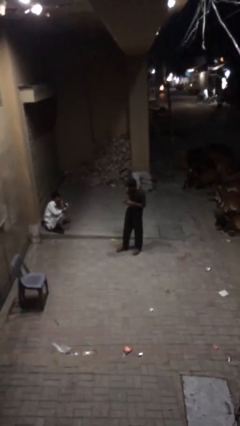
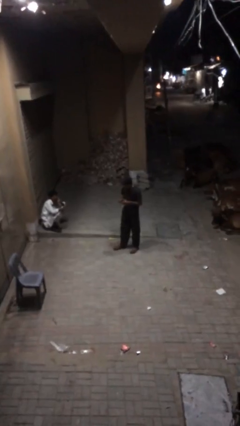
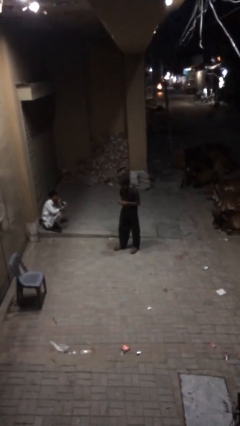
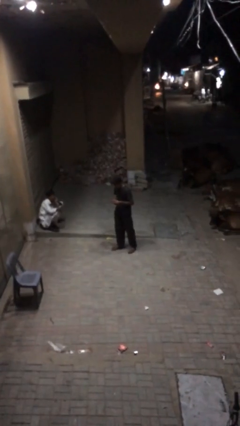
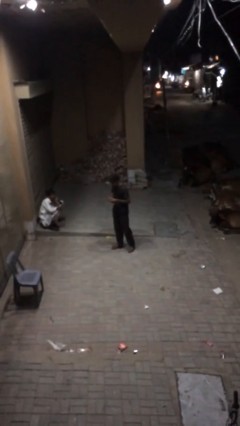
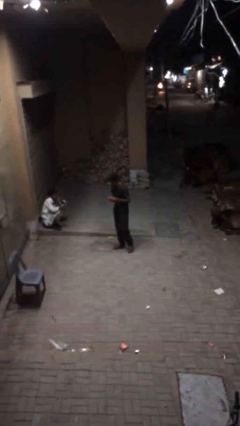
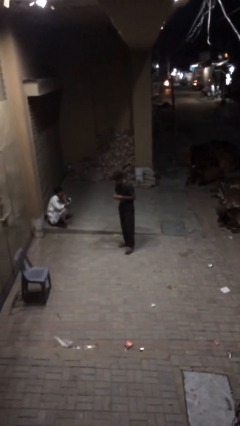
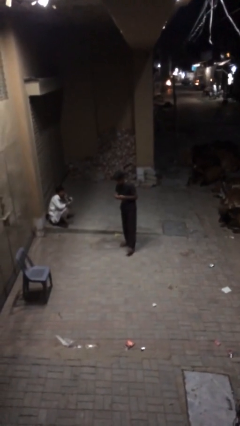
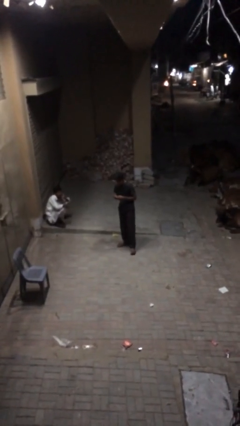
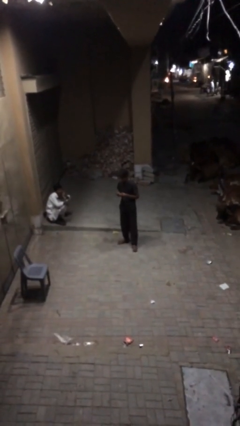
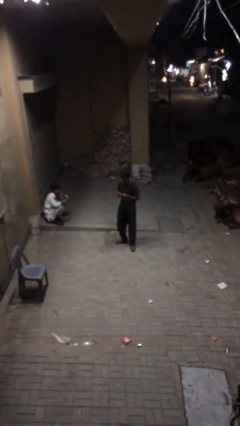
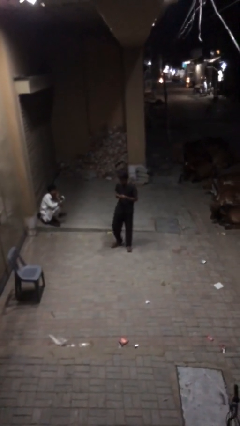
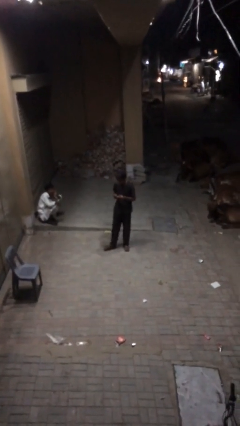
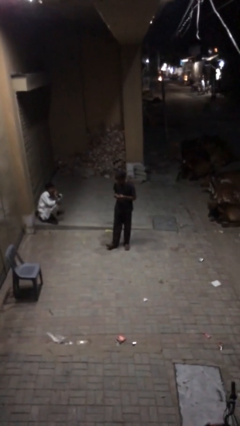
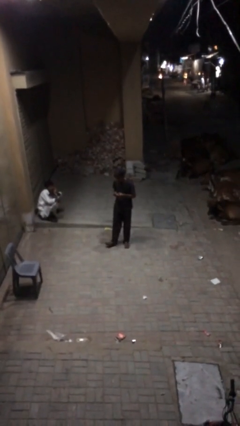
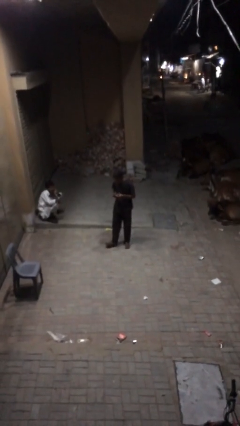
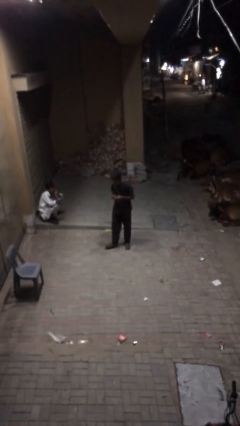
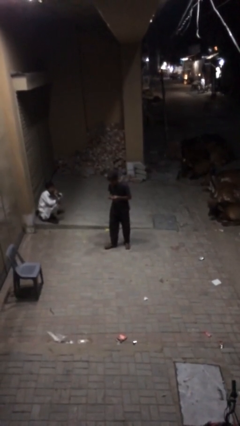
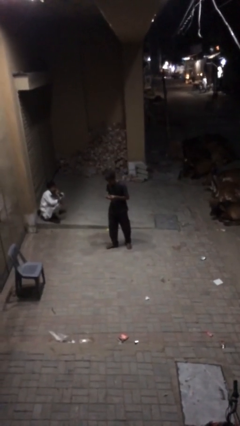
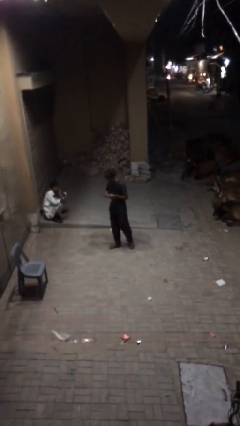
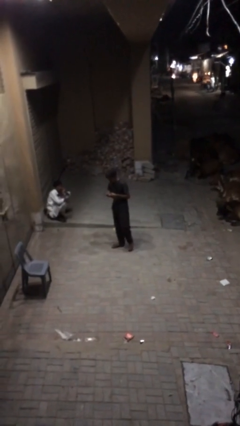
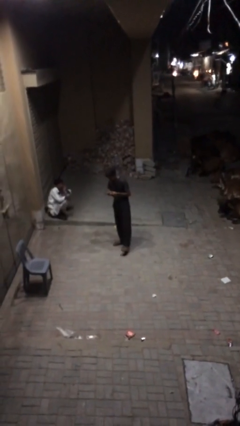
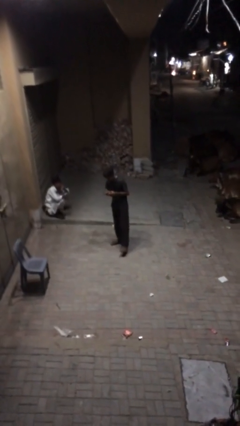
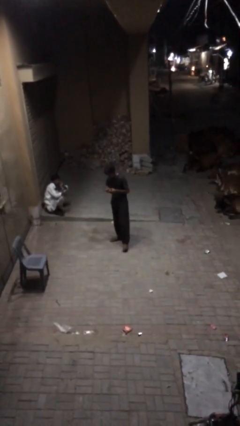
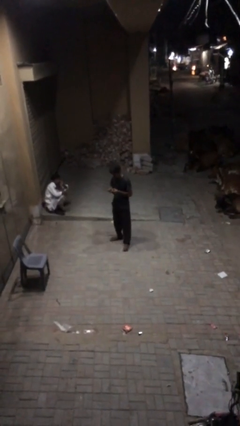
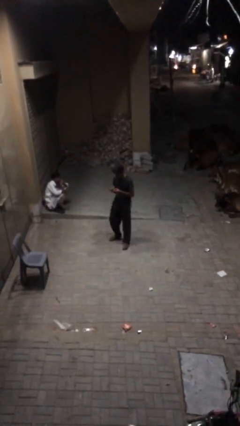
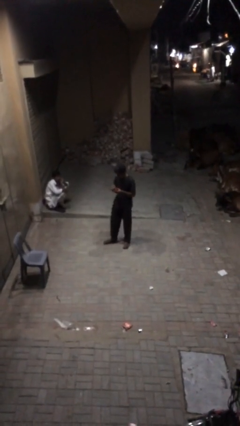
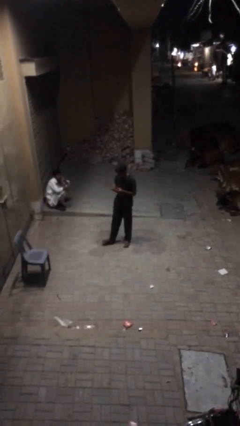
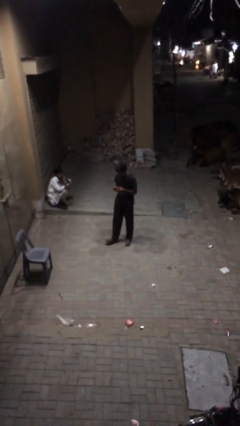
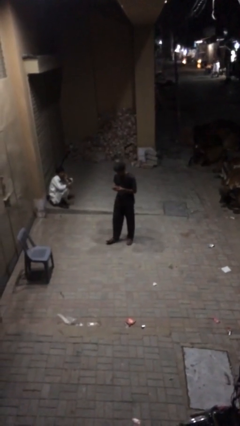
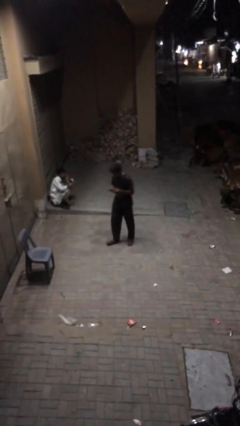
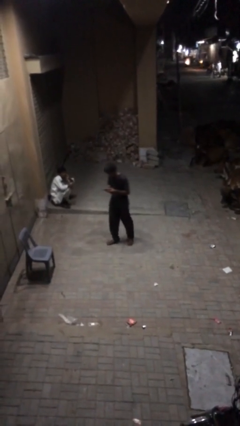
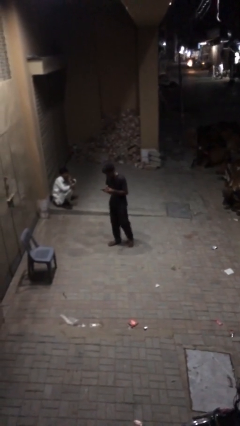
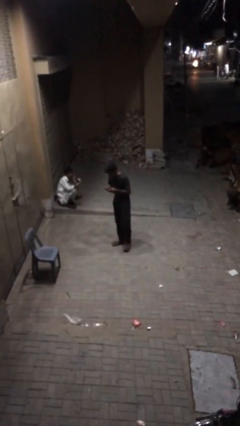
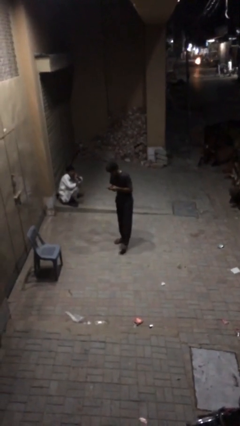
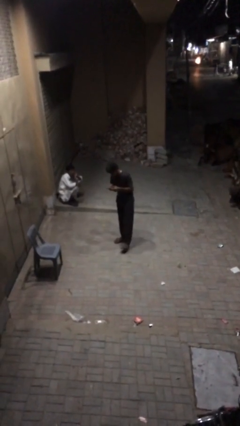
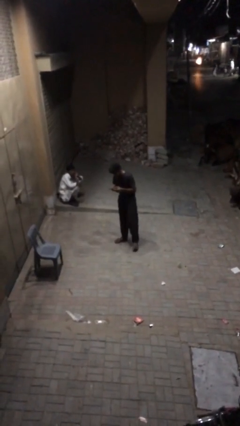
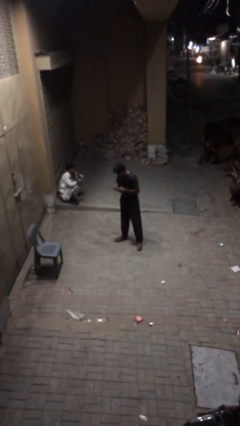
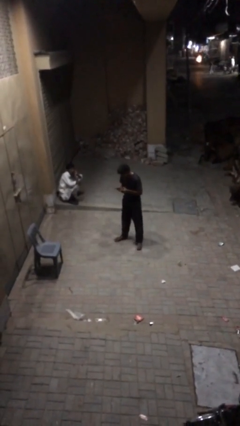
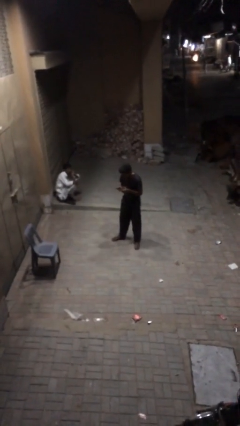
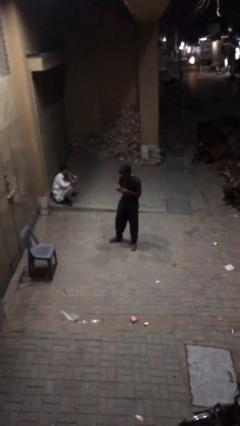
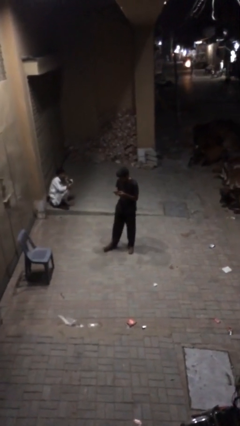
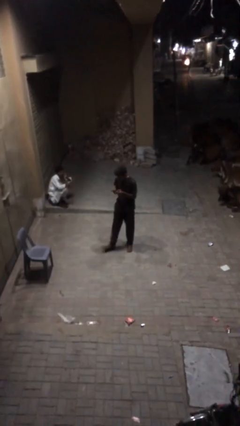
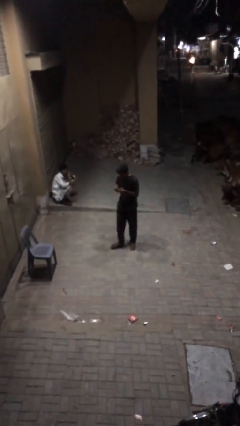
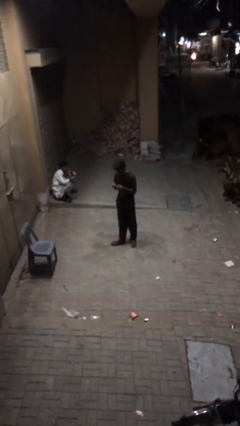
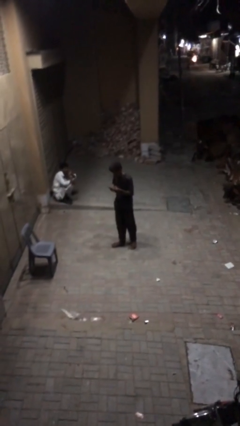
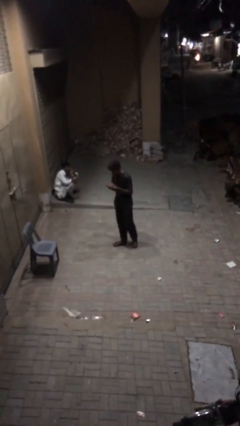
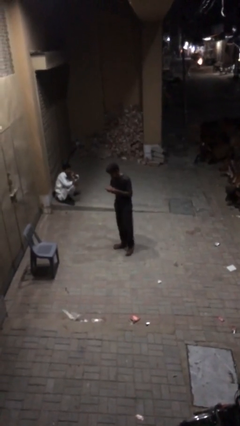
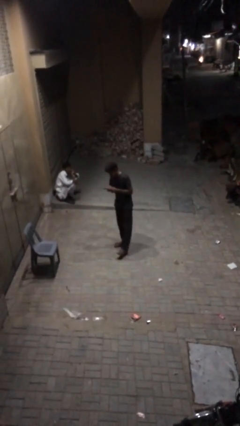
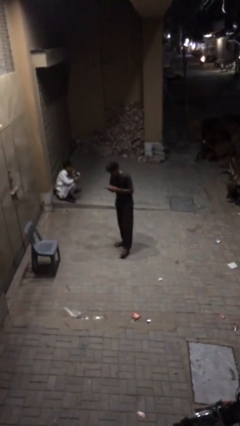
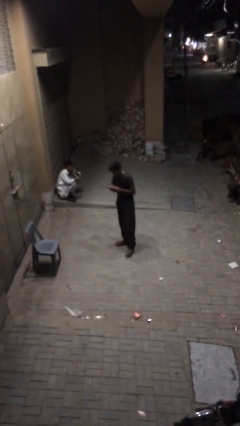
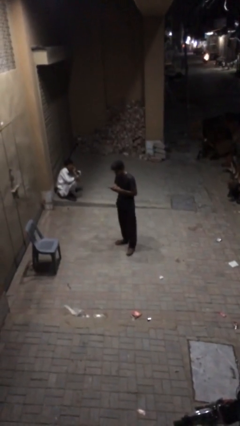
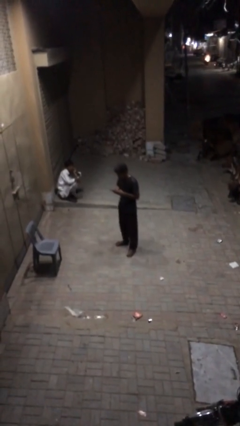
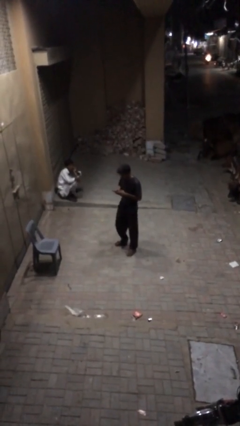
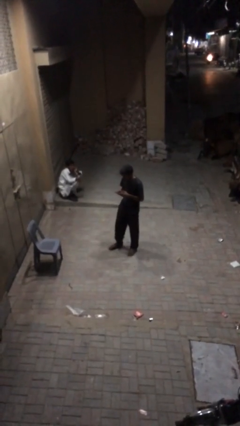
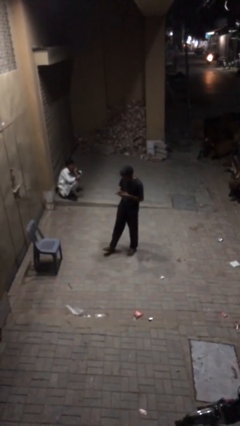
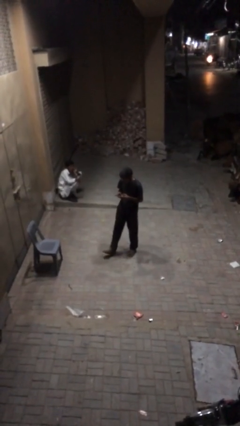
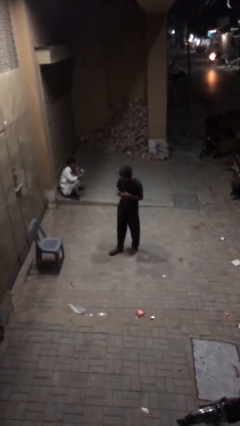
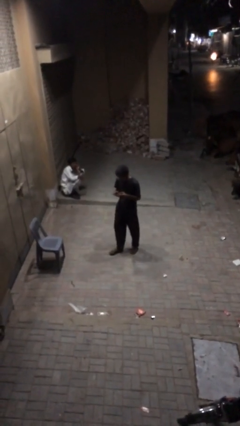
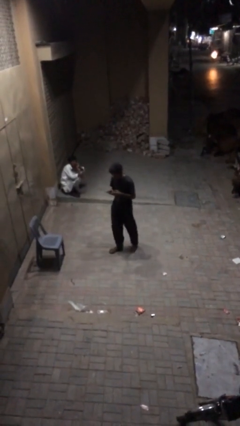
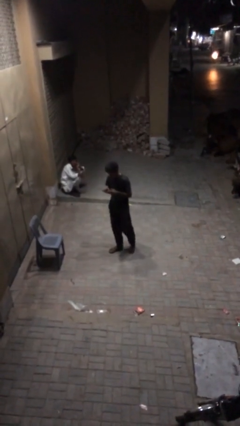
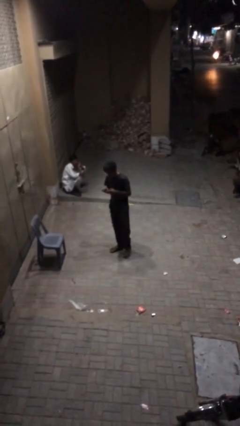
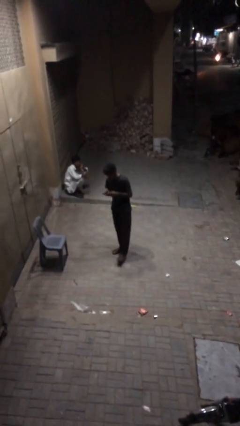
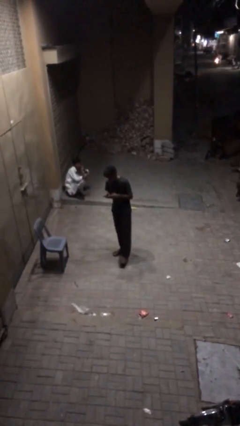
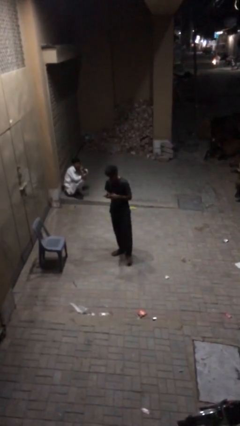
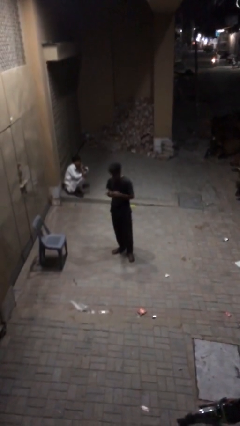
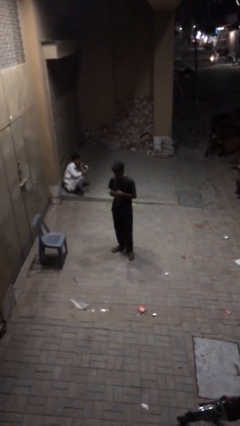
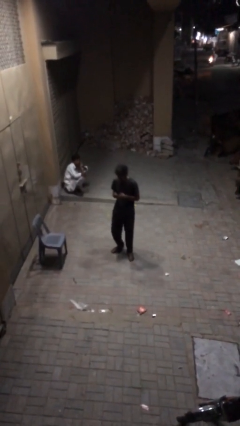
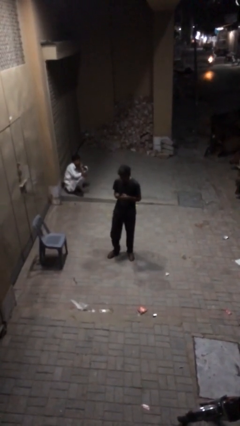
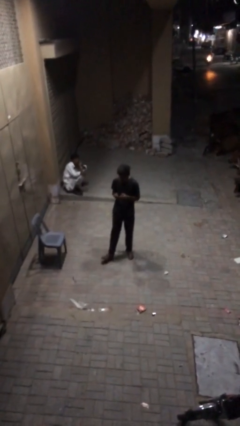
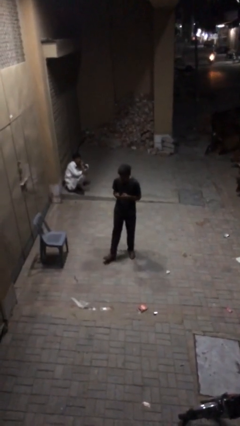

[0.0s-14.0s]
person texts on phone

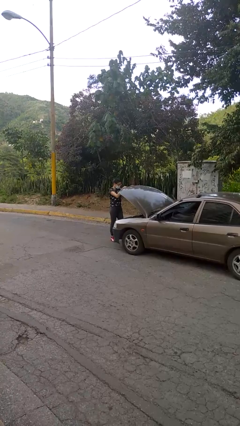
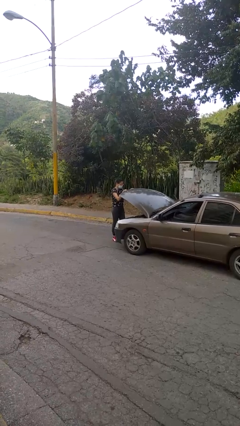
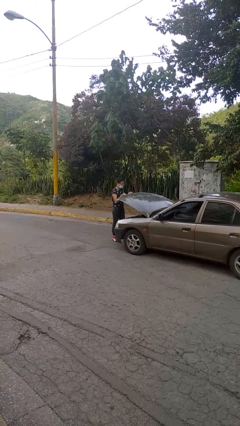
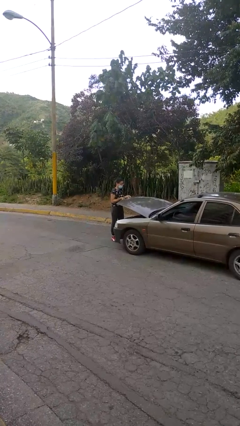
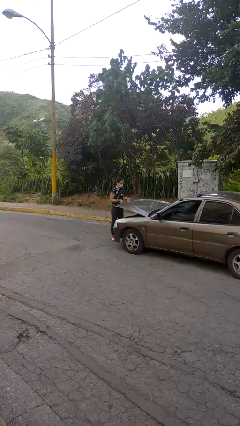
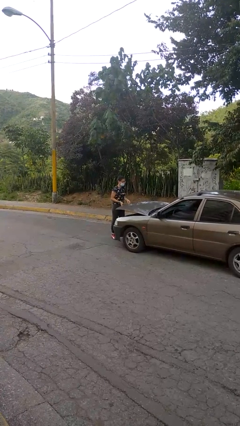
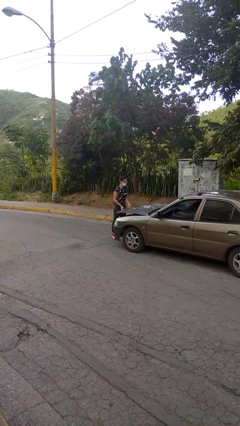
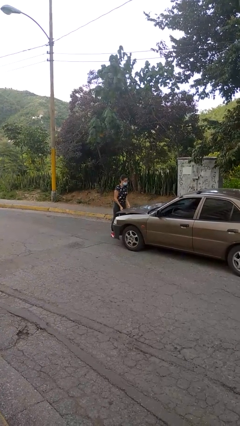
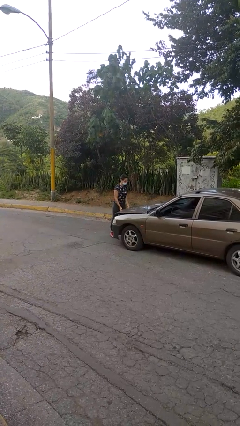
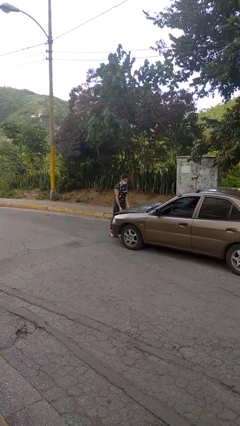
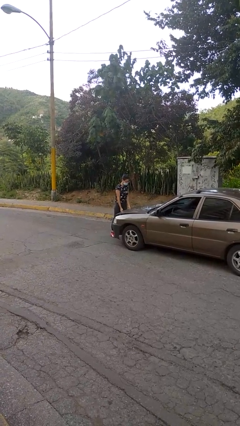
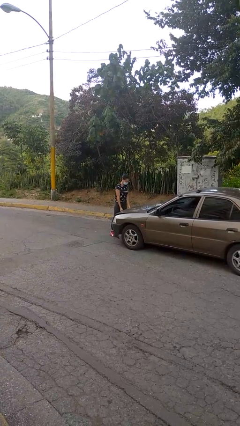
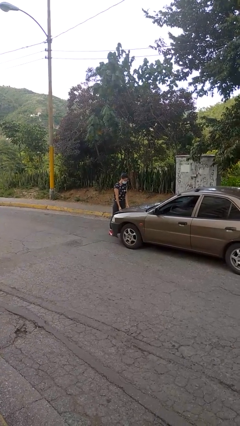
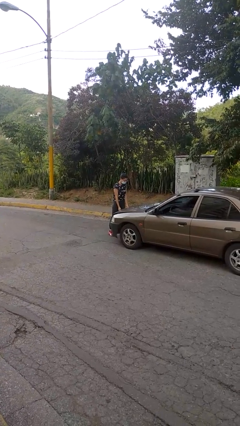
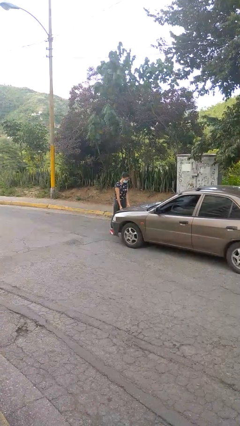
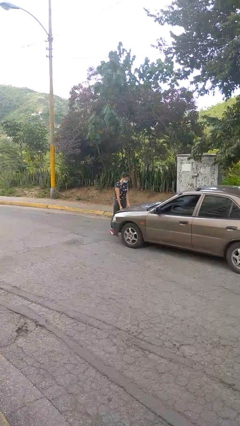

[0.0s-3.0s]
person closes car hood

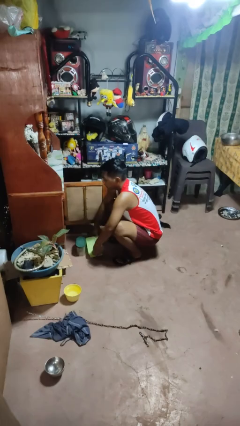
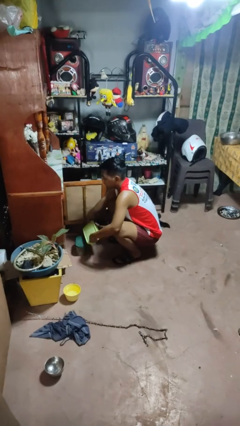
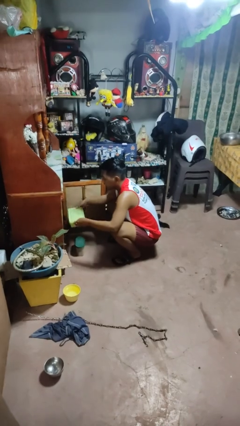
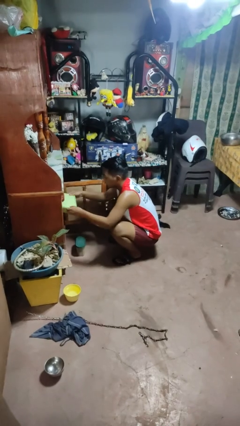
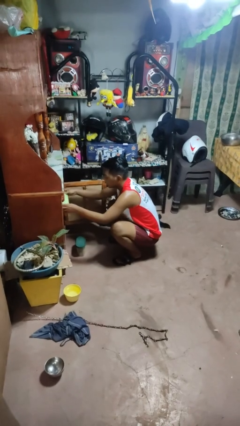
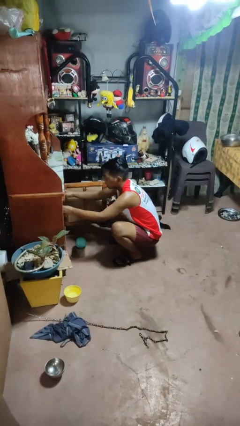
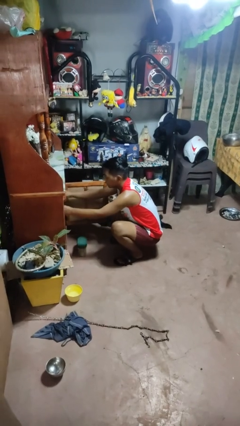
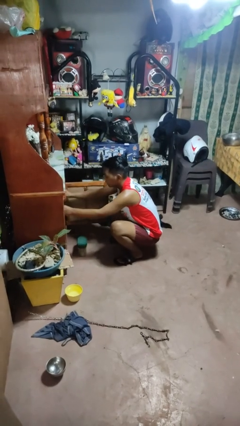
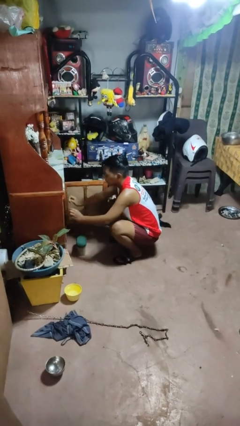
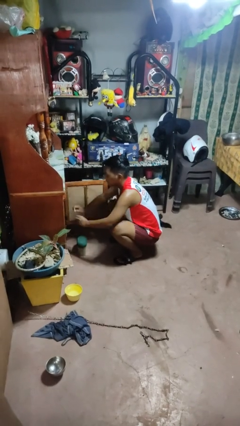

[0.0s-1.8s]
person puts object in cabinet
